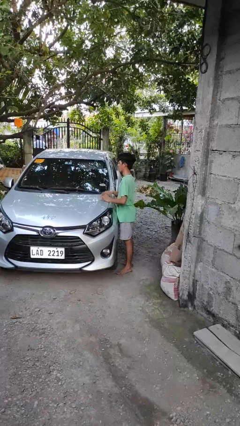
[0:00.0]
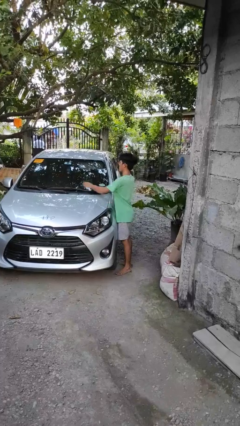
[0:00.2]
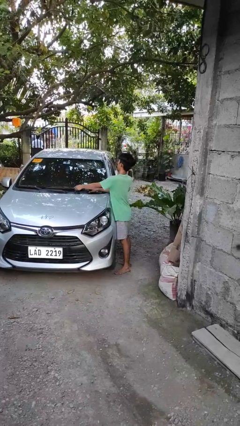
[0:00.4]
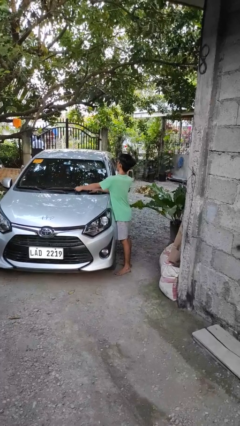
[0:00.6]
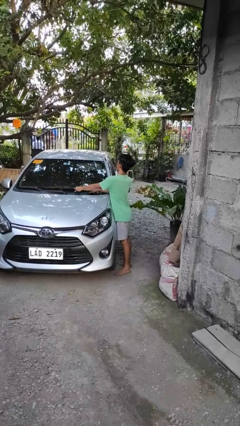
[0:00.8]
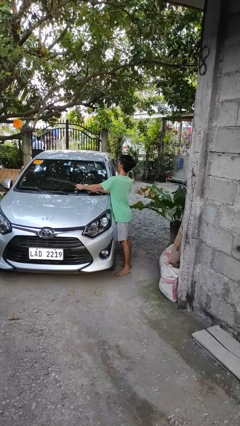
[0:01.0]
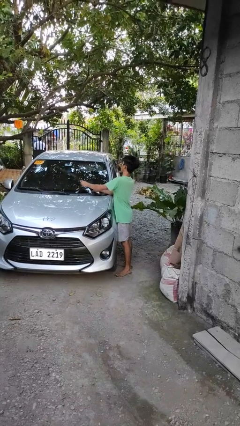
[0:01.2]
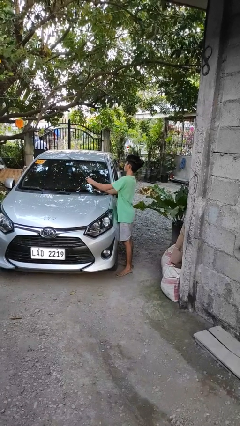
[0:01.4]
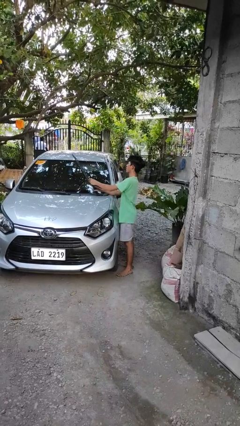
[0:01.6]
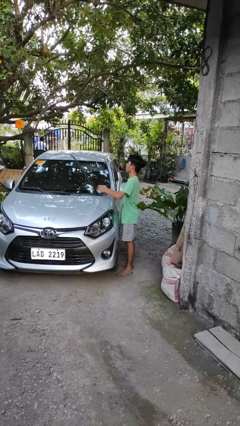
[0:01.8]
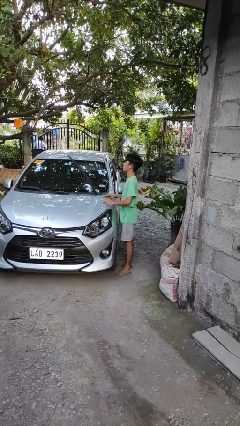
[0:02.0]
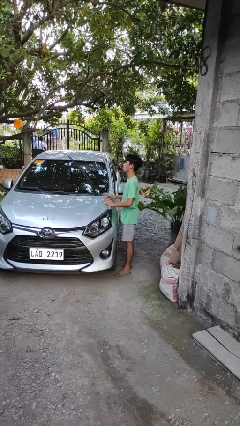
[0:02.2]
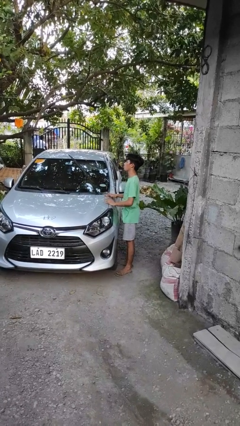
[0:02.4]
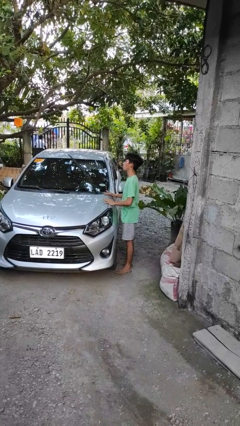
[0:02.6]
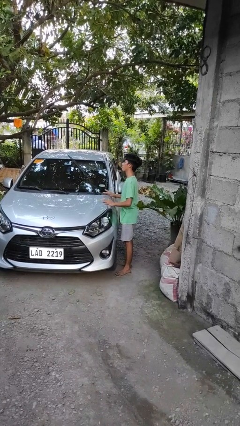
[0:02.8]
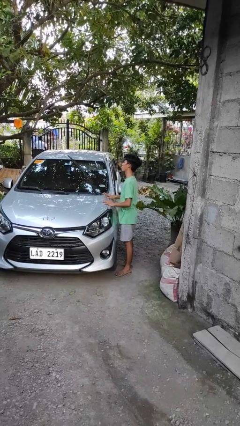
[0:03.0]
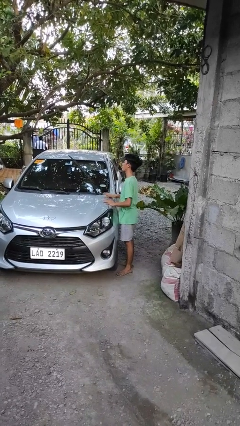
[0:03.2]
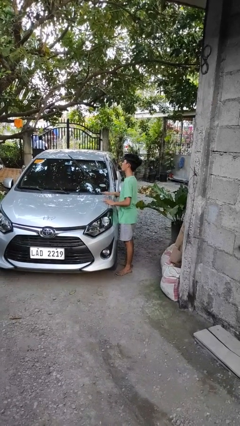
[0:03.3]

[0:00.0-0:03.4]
person flips up car wipers

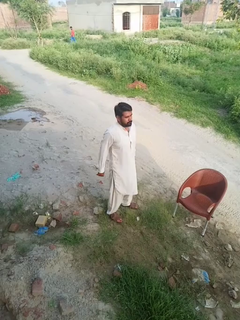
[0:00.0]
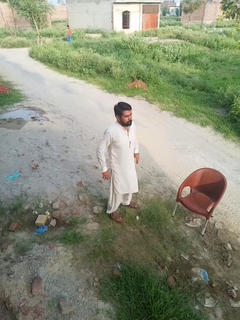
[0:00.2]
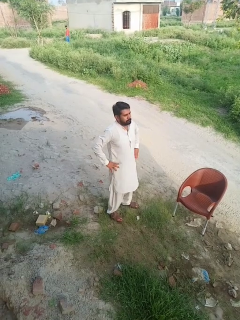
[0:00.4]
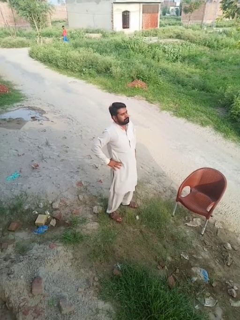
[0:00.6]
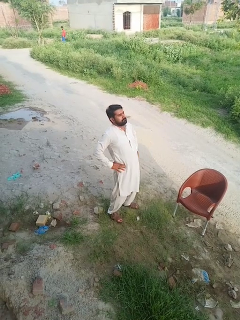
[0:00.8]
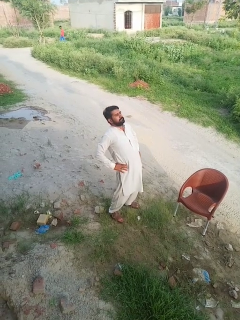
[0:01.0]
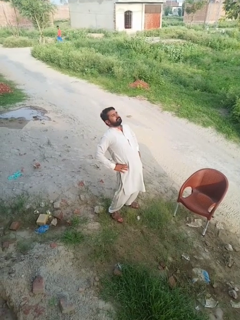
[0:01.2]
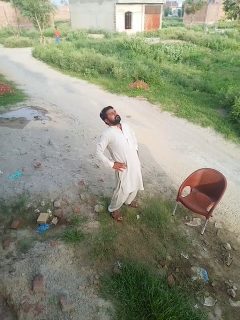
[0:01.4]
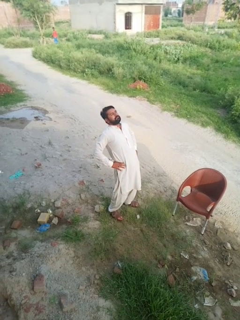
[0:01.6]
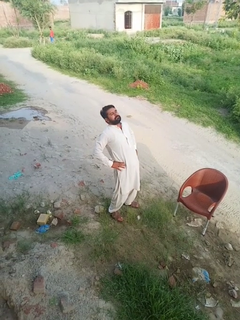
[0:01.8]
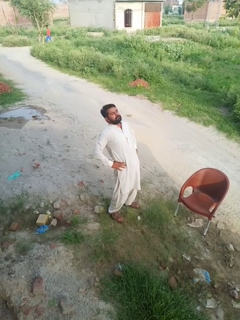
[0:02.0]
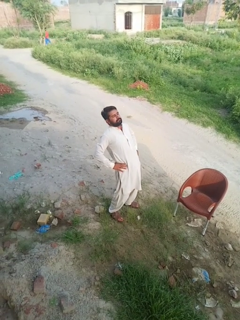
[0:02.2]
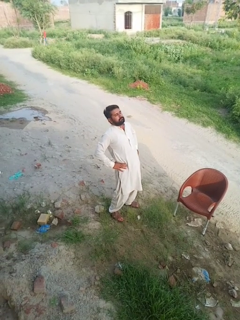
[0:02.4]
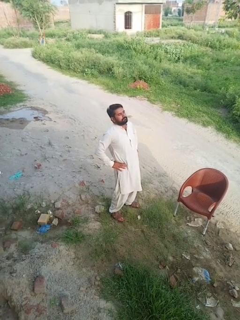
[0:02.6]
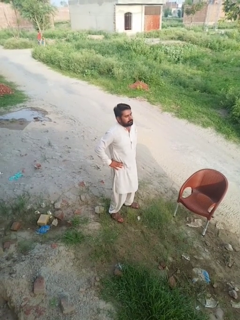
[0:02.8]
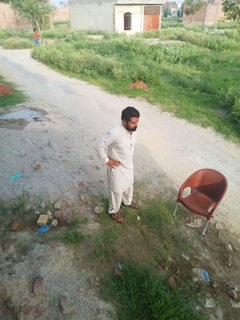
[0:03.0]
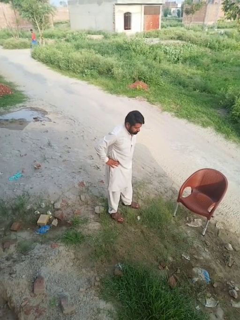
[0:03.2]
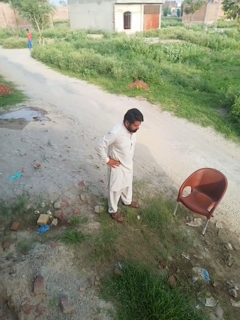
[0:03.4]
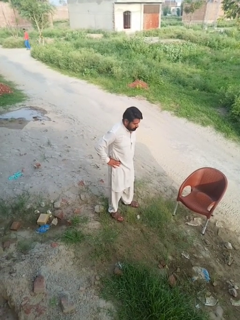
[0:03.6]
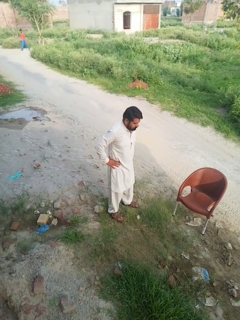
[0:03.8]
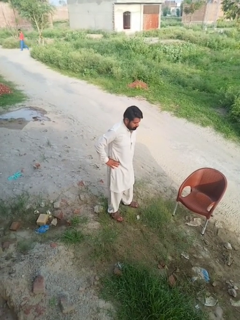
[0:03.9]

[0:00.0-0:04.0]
person stretches back

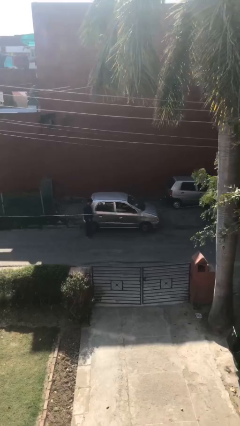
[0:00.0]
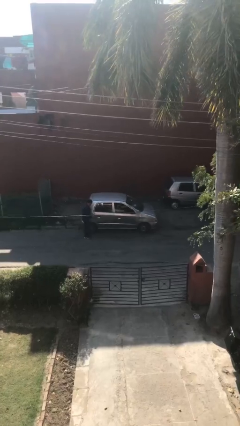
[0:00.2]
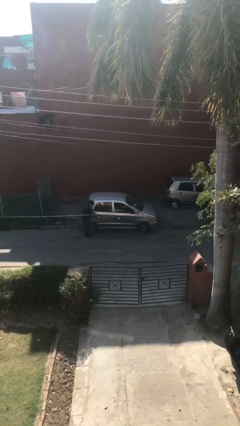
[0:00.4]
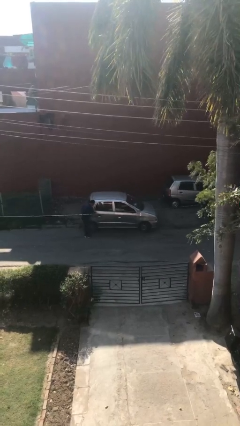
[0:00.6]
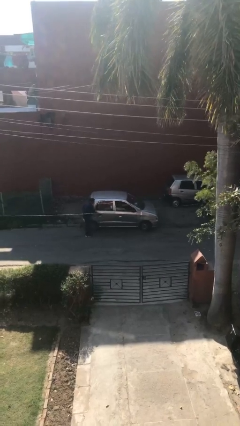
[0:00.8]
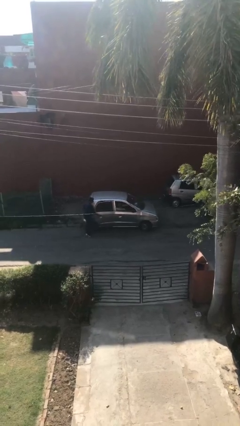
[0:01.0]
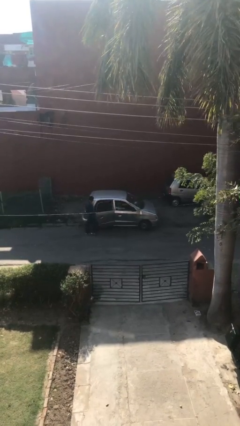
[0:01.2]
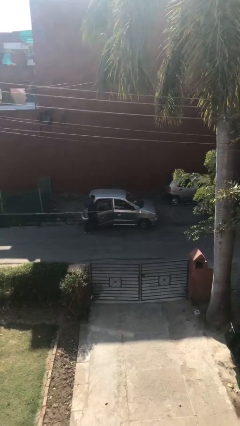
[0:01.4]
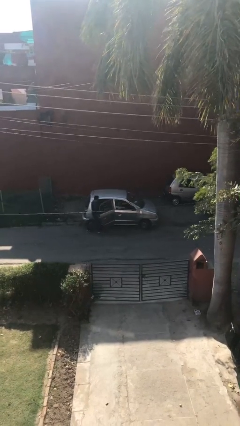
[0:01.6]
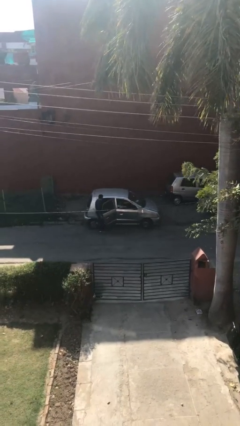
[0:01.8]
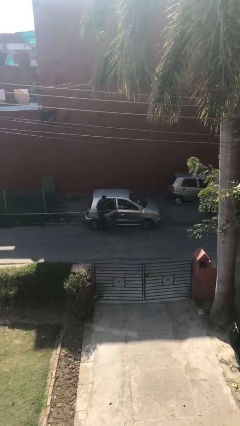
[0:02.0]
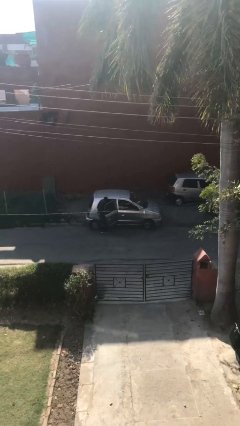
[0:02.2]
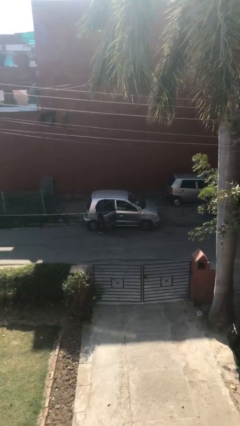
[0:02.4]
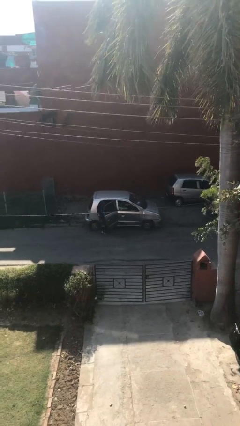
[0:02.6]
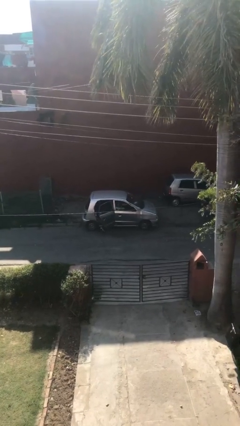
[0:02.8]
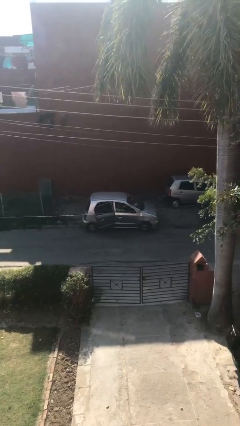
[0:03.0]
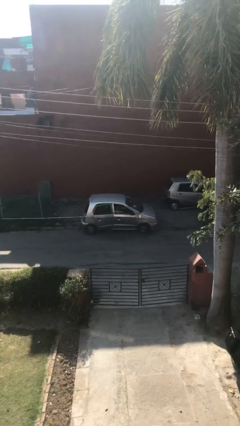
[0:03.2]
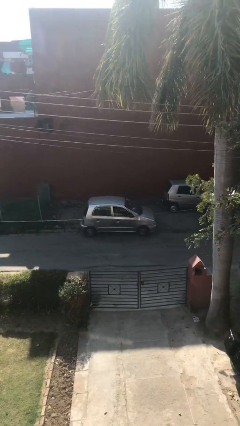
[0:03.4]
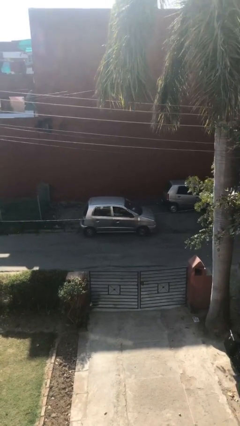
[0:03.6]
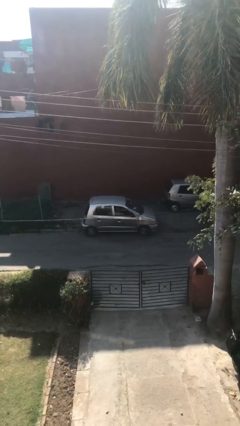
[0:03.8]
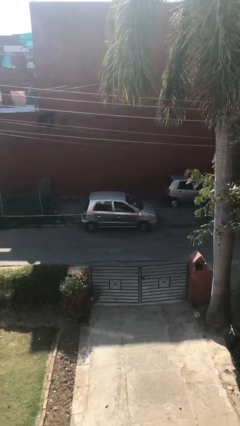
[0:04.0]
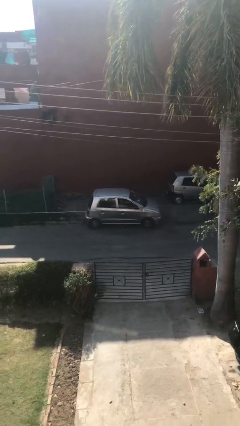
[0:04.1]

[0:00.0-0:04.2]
car picks up person

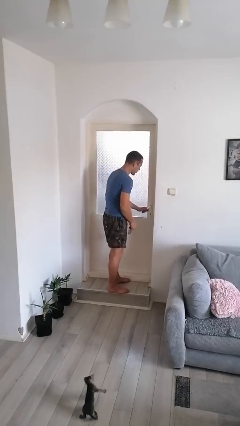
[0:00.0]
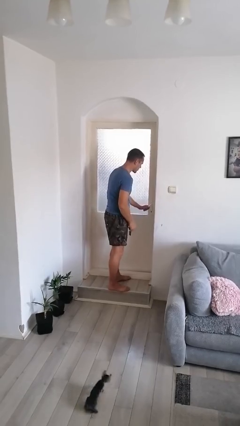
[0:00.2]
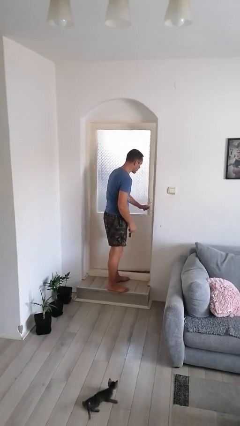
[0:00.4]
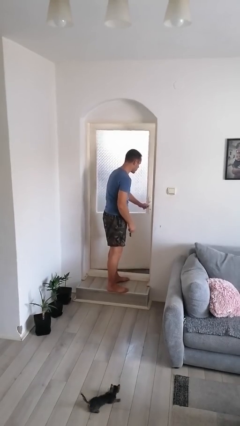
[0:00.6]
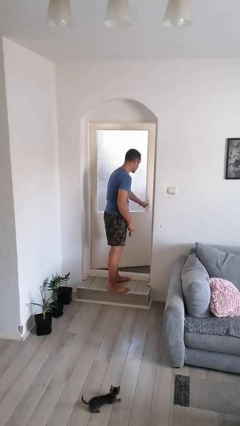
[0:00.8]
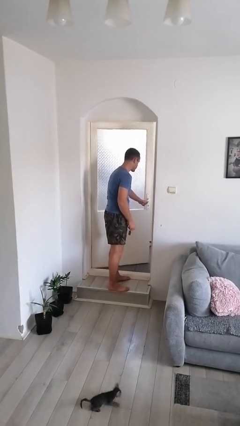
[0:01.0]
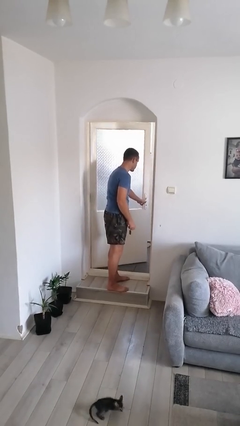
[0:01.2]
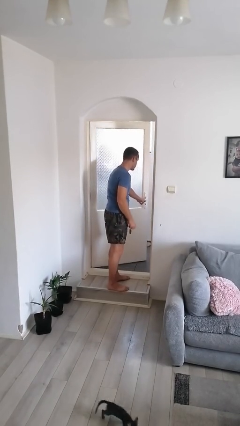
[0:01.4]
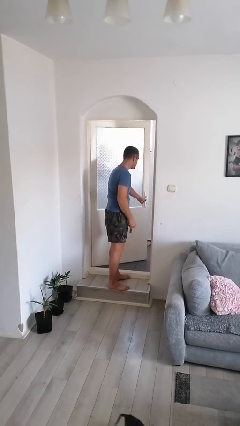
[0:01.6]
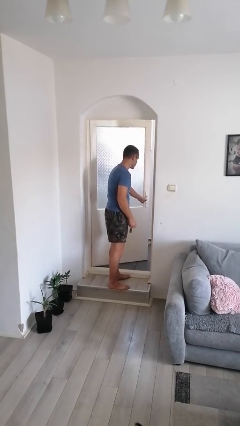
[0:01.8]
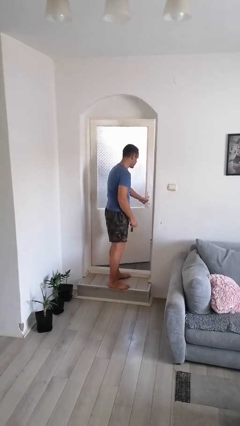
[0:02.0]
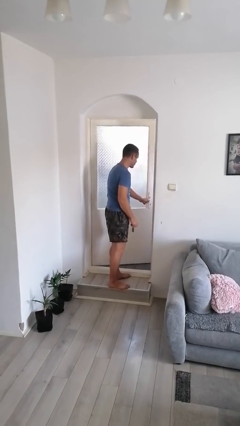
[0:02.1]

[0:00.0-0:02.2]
person opens facility door

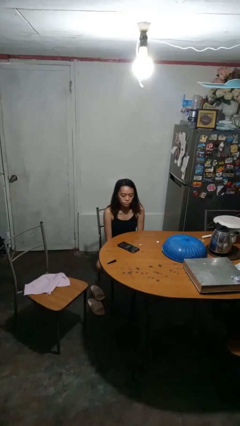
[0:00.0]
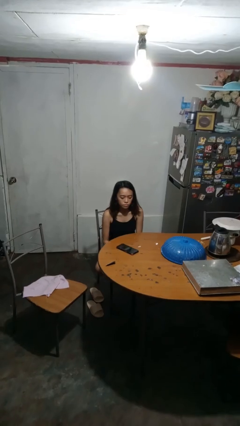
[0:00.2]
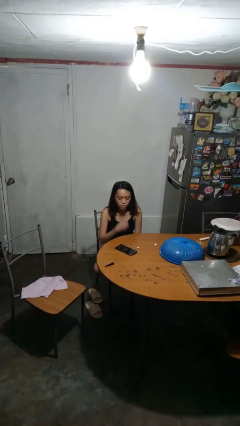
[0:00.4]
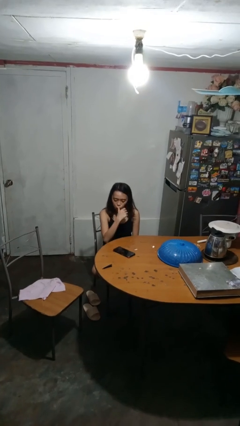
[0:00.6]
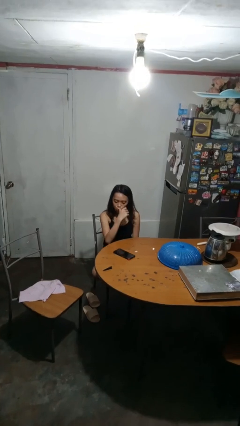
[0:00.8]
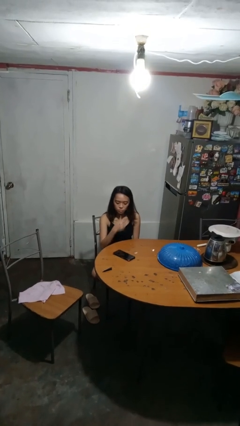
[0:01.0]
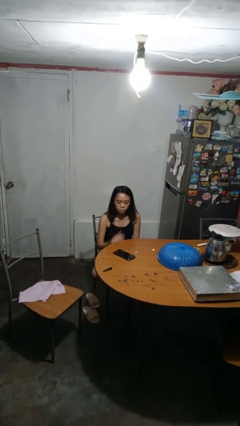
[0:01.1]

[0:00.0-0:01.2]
person licks fingers

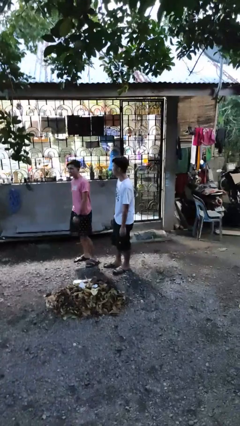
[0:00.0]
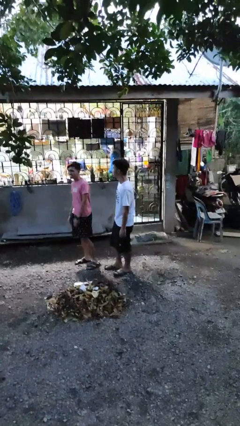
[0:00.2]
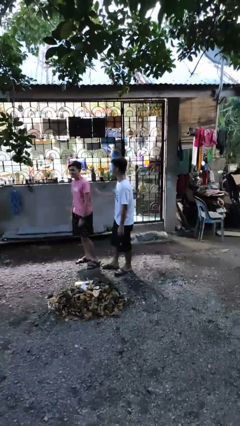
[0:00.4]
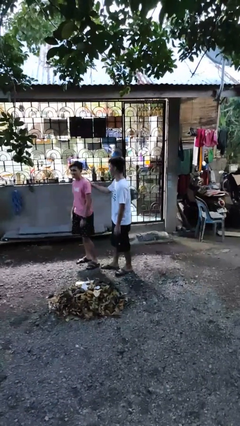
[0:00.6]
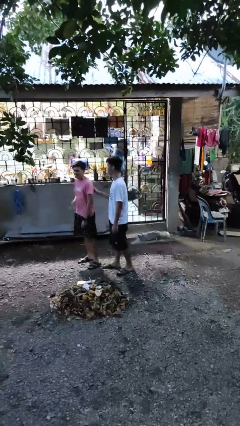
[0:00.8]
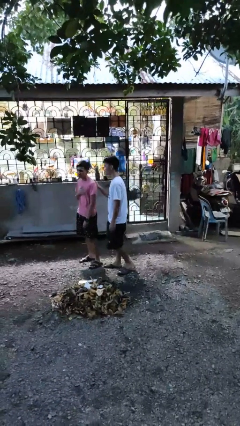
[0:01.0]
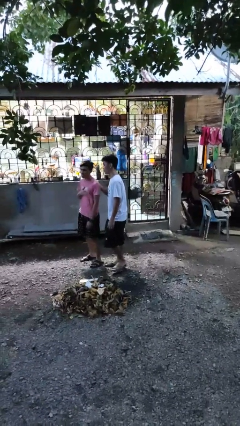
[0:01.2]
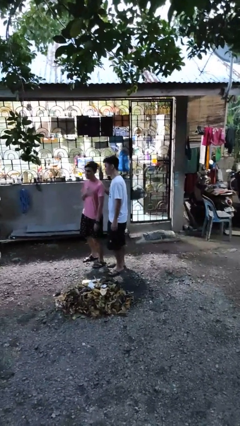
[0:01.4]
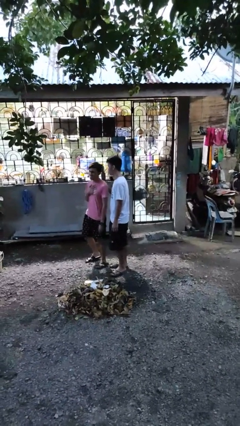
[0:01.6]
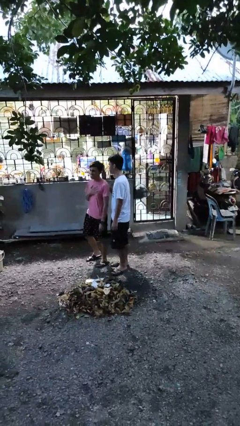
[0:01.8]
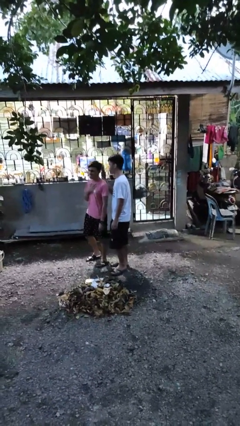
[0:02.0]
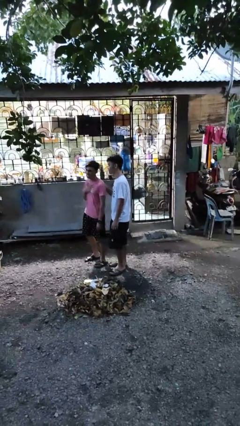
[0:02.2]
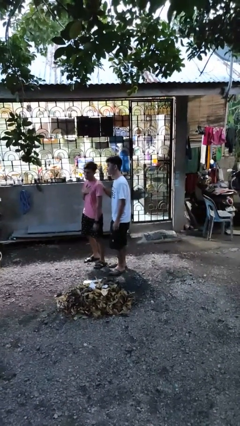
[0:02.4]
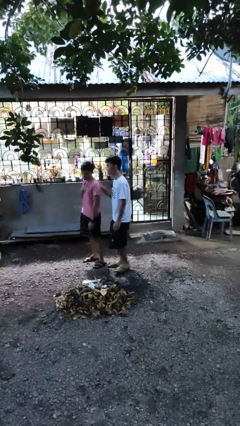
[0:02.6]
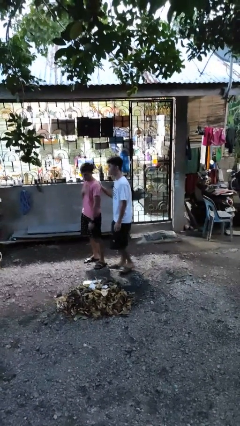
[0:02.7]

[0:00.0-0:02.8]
person touches back of person

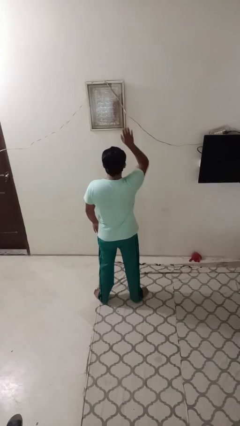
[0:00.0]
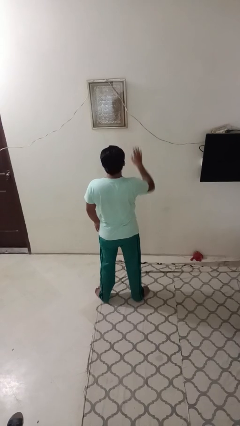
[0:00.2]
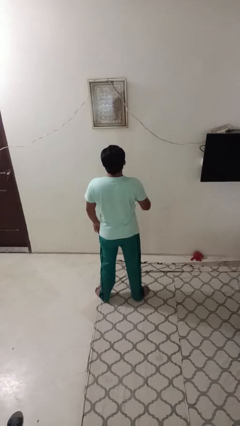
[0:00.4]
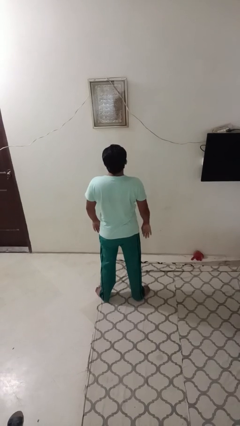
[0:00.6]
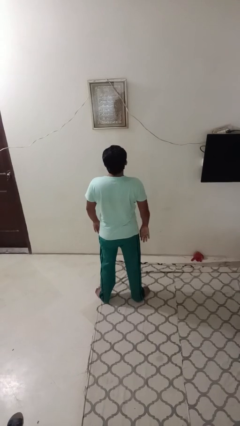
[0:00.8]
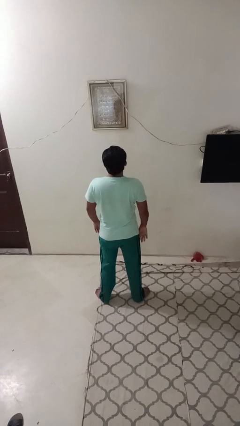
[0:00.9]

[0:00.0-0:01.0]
person gestures lower hand
